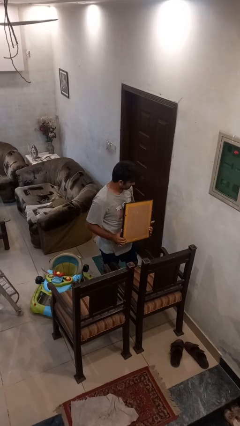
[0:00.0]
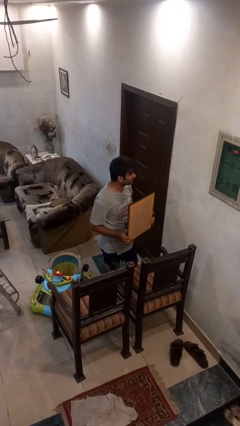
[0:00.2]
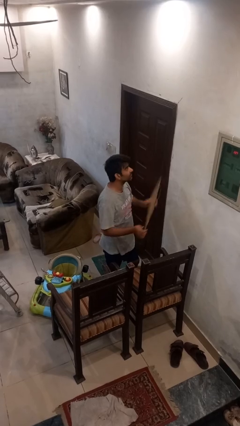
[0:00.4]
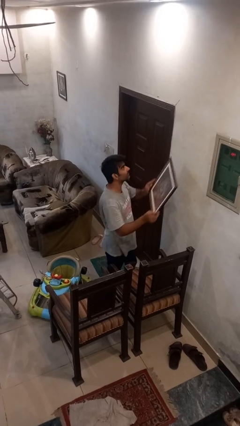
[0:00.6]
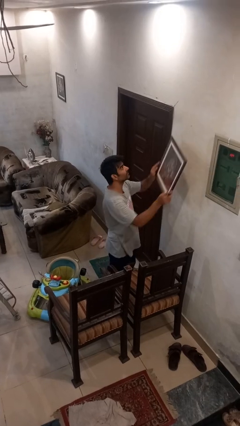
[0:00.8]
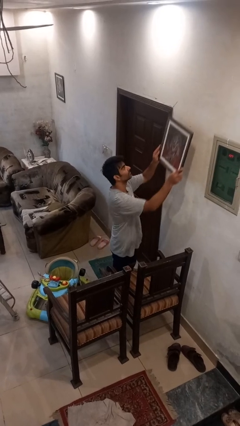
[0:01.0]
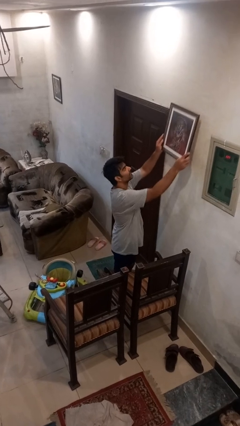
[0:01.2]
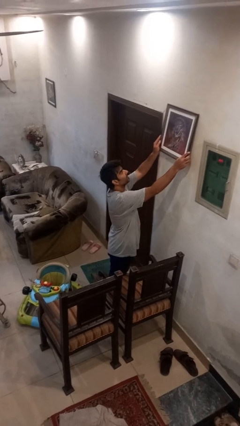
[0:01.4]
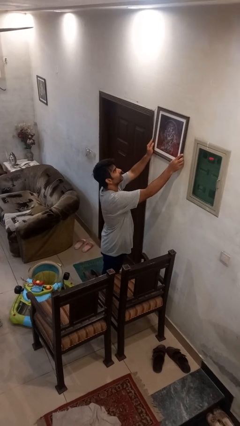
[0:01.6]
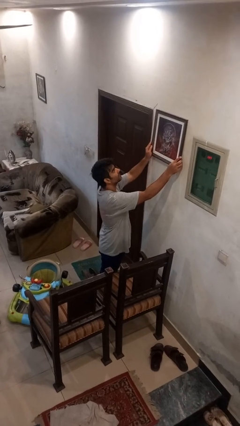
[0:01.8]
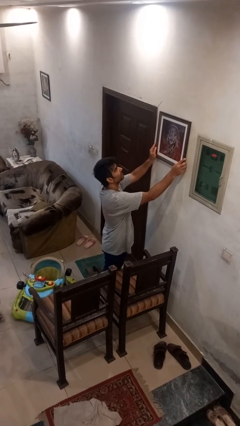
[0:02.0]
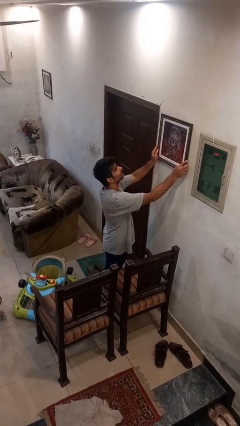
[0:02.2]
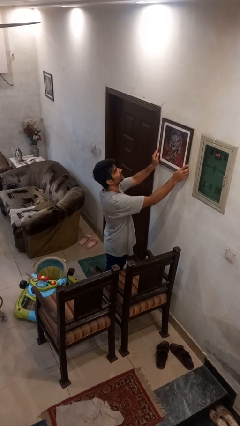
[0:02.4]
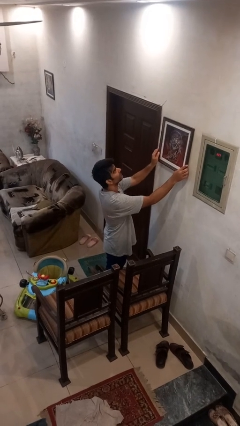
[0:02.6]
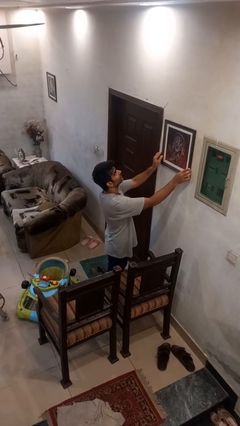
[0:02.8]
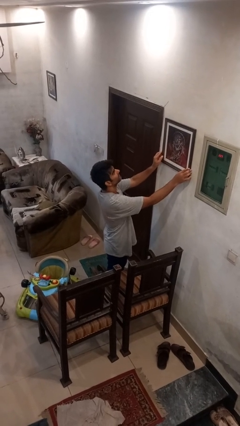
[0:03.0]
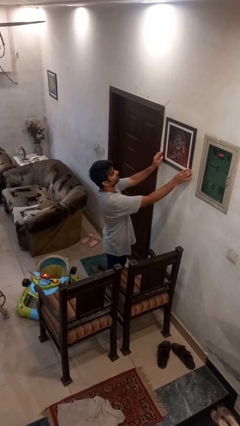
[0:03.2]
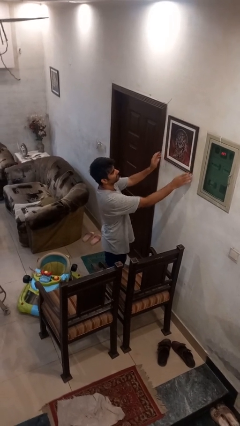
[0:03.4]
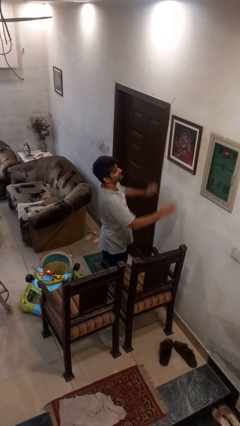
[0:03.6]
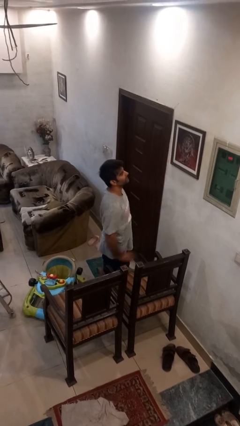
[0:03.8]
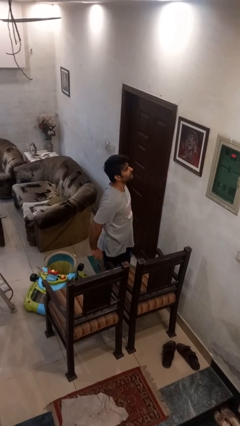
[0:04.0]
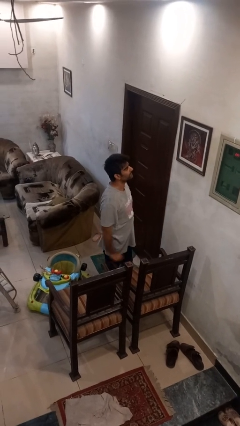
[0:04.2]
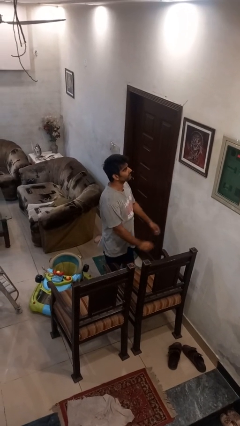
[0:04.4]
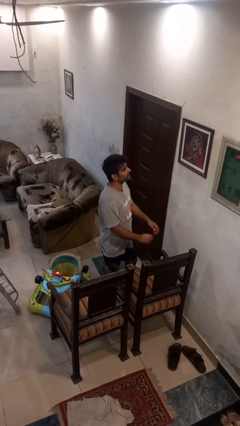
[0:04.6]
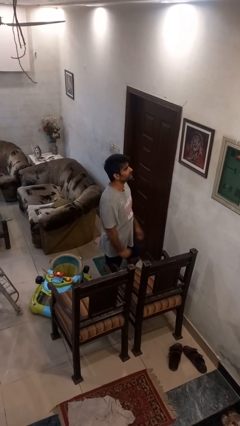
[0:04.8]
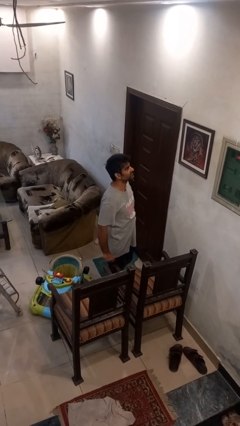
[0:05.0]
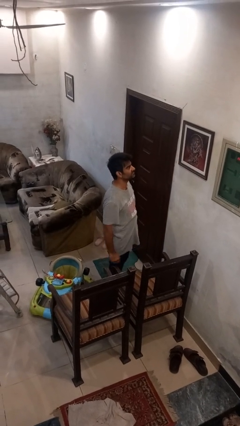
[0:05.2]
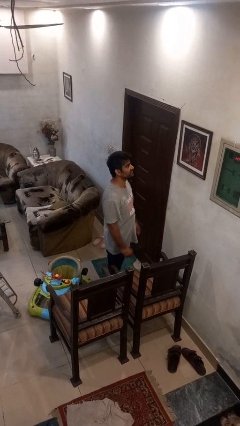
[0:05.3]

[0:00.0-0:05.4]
person puts up picture frame

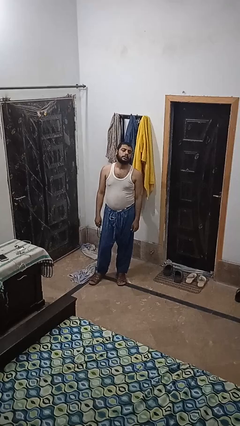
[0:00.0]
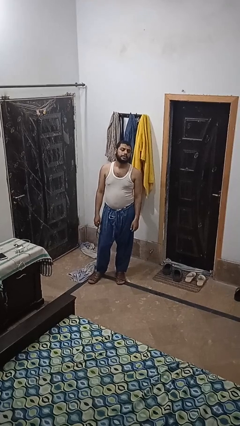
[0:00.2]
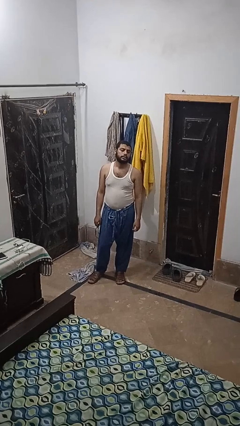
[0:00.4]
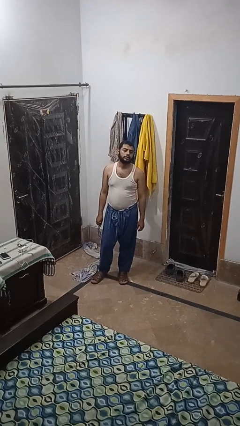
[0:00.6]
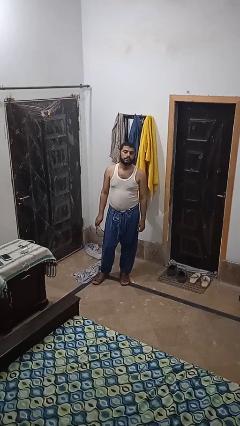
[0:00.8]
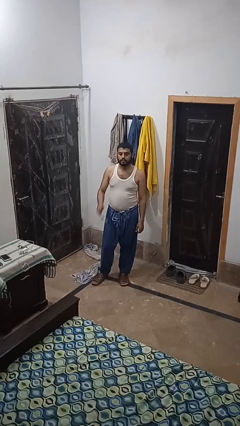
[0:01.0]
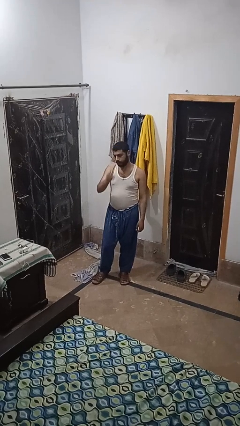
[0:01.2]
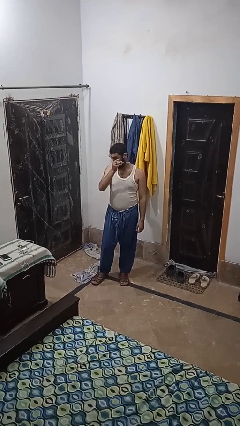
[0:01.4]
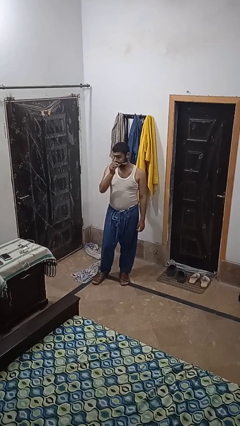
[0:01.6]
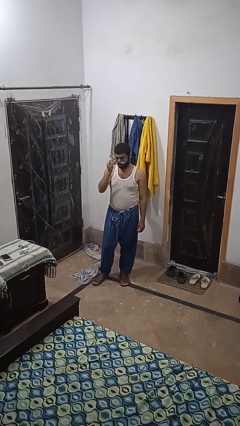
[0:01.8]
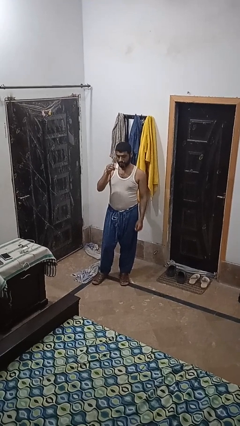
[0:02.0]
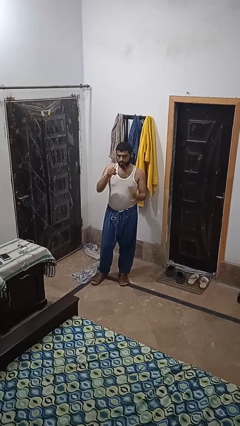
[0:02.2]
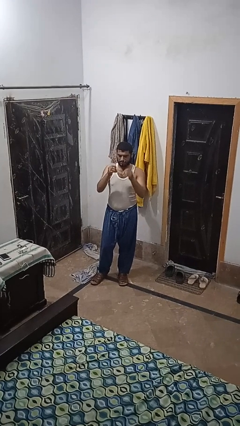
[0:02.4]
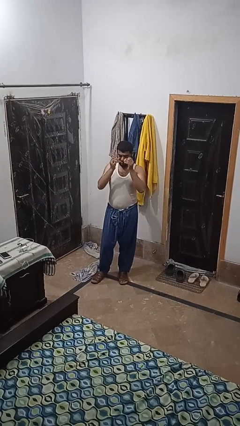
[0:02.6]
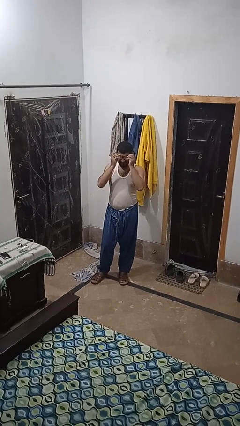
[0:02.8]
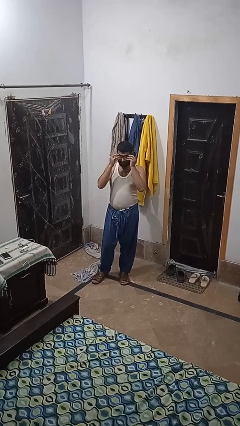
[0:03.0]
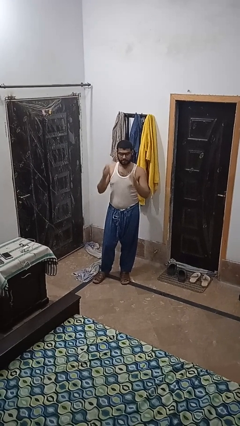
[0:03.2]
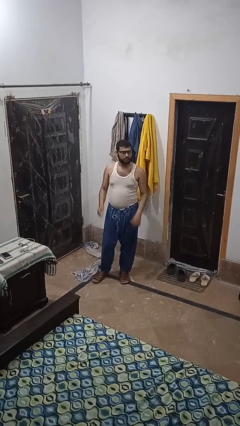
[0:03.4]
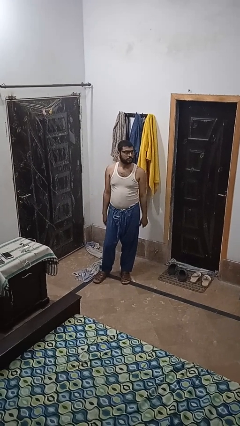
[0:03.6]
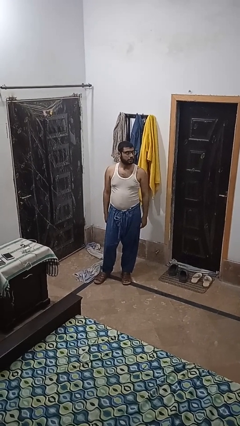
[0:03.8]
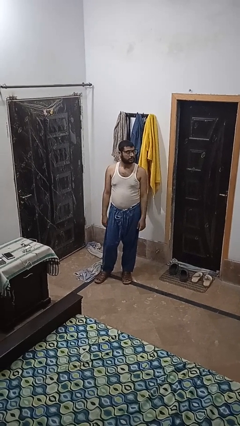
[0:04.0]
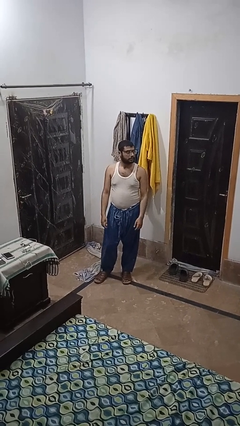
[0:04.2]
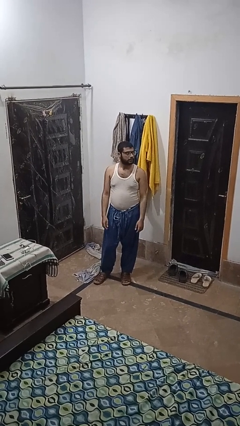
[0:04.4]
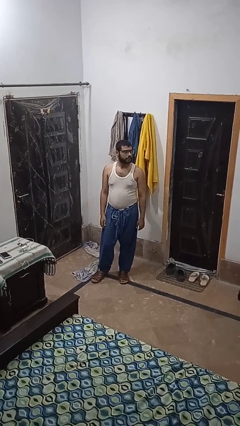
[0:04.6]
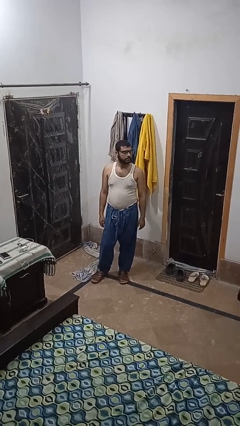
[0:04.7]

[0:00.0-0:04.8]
person puts on glasses

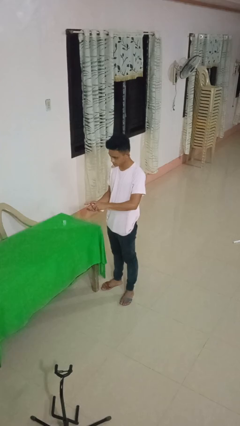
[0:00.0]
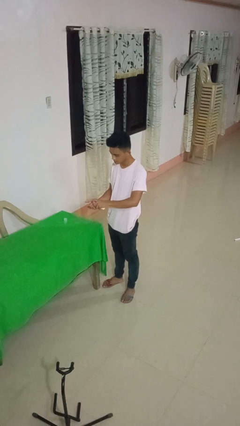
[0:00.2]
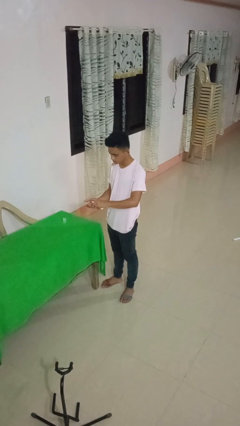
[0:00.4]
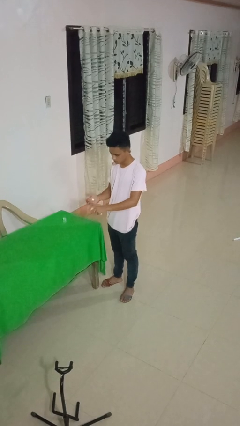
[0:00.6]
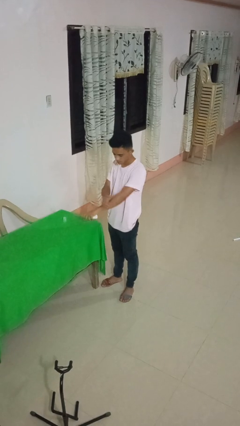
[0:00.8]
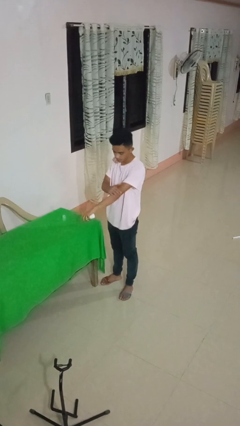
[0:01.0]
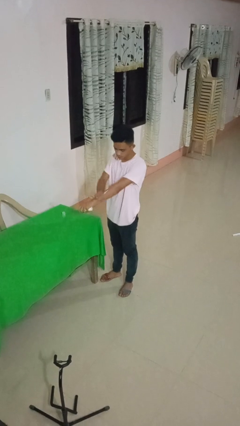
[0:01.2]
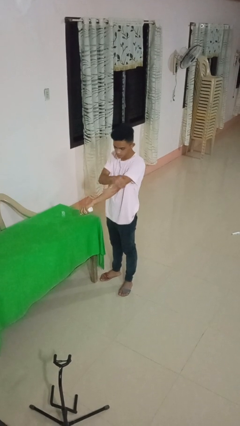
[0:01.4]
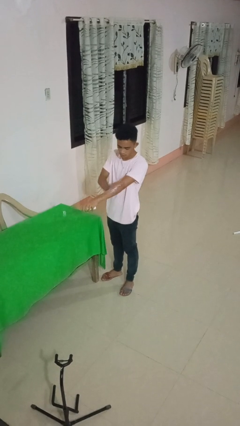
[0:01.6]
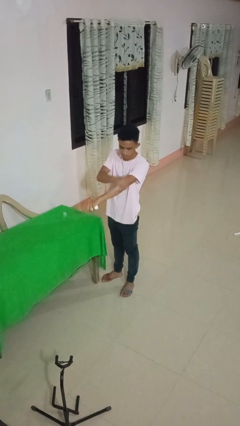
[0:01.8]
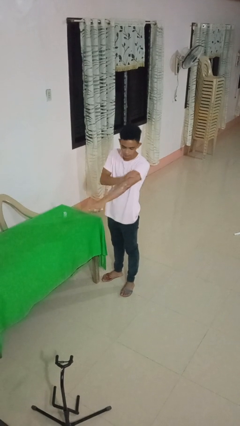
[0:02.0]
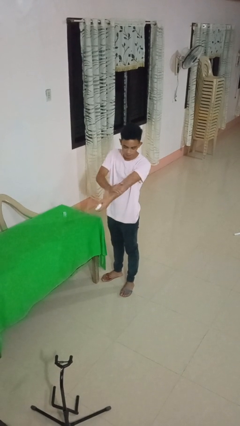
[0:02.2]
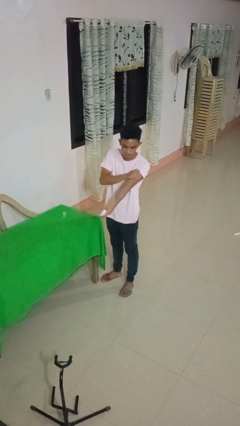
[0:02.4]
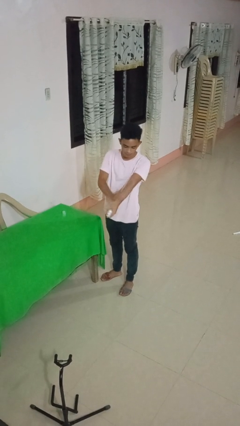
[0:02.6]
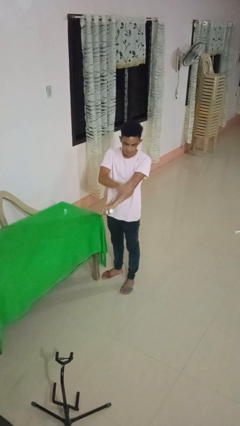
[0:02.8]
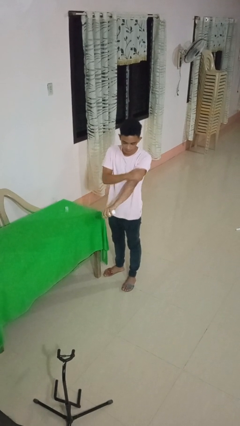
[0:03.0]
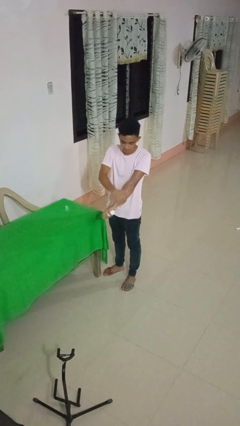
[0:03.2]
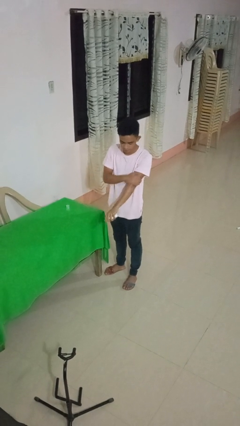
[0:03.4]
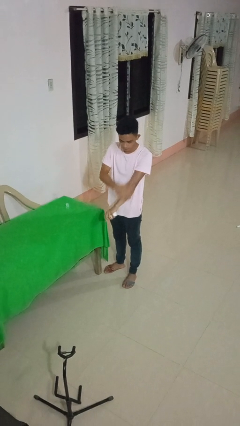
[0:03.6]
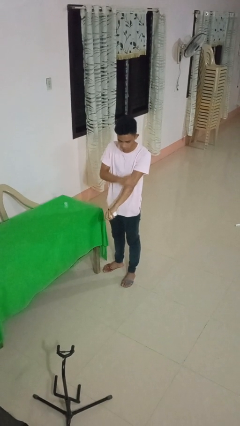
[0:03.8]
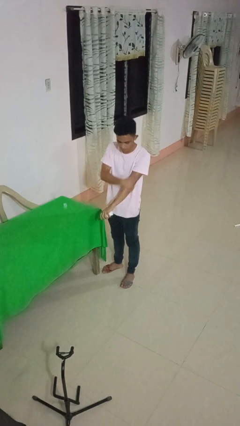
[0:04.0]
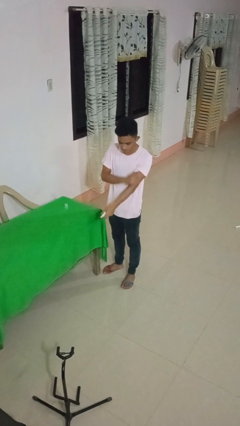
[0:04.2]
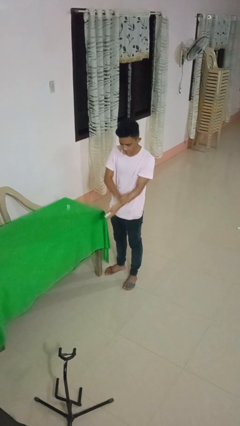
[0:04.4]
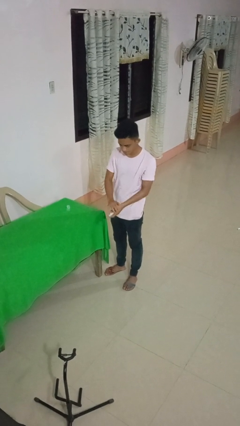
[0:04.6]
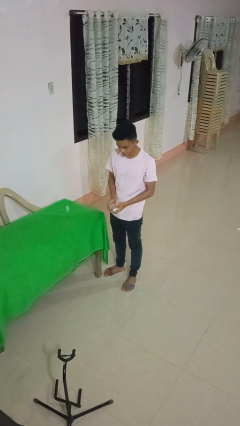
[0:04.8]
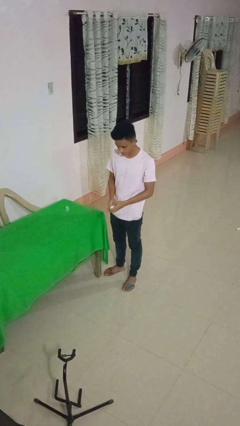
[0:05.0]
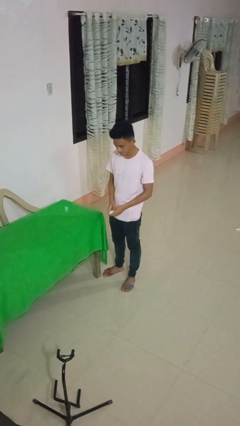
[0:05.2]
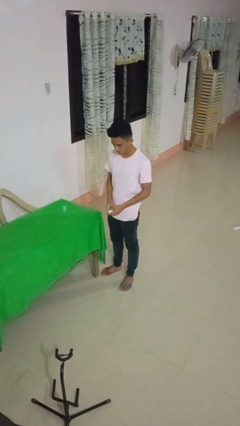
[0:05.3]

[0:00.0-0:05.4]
person applies sunscreen

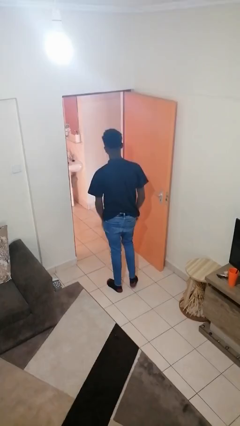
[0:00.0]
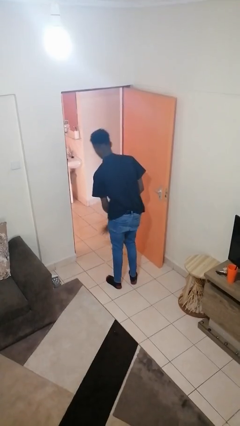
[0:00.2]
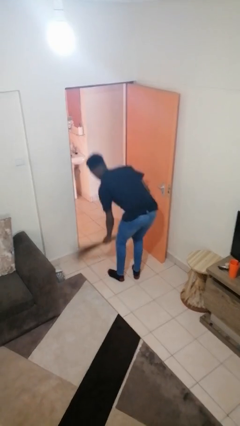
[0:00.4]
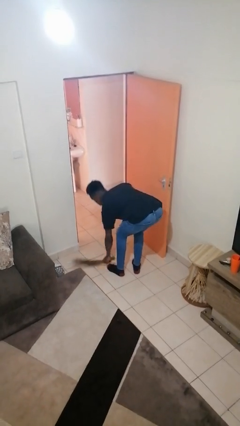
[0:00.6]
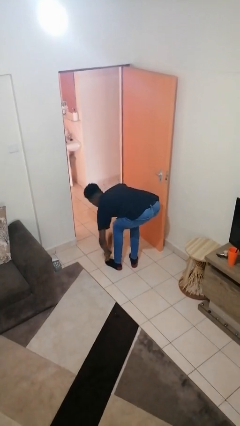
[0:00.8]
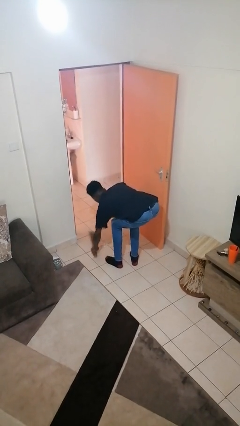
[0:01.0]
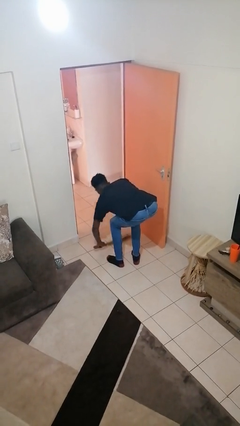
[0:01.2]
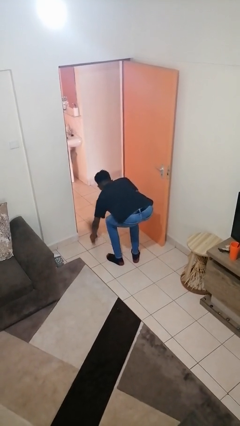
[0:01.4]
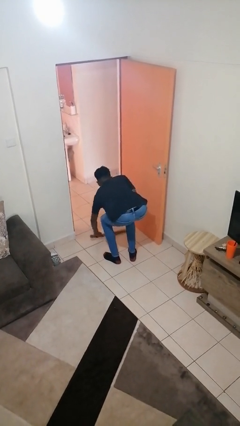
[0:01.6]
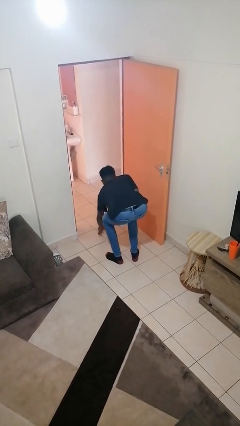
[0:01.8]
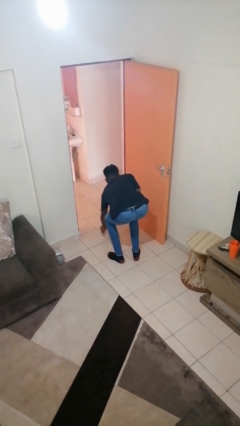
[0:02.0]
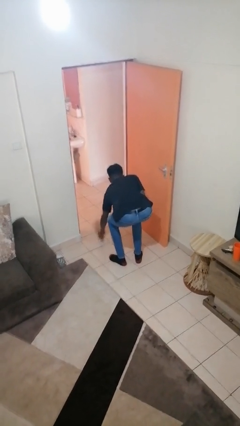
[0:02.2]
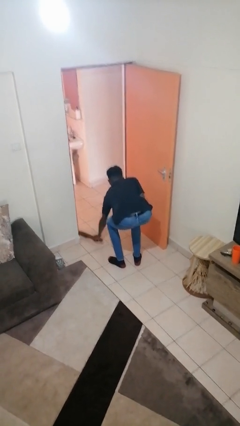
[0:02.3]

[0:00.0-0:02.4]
person sweeps floor
